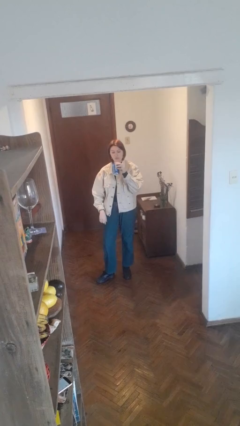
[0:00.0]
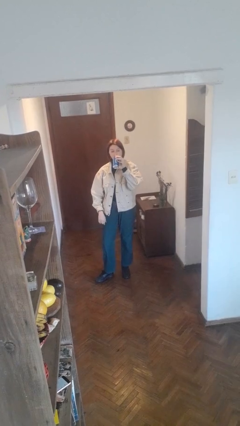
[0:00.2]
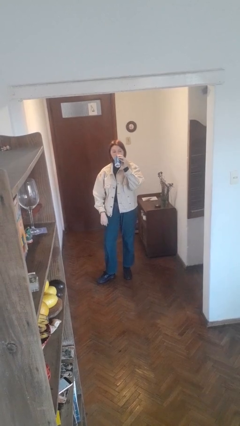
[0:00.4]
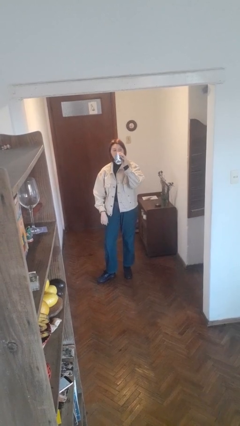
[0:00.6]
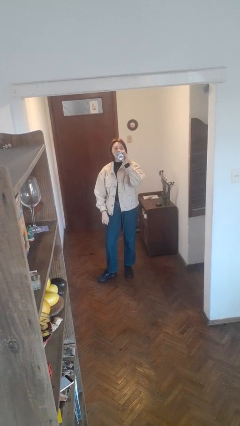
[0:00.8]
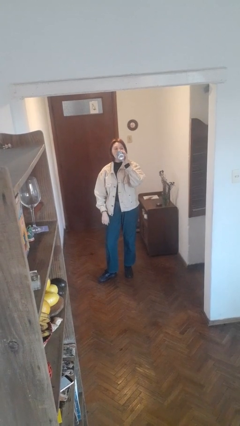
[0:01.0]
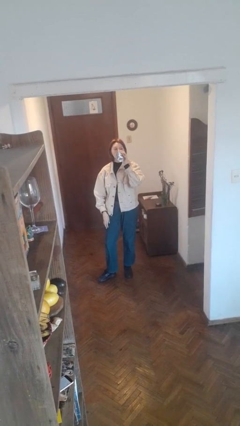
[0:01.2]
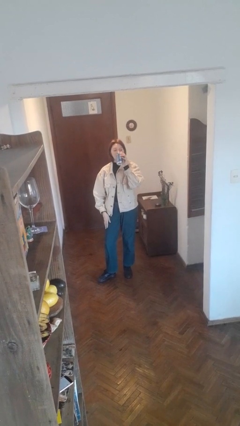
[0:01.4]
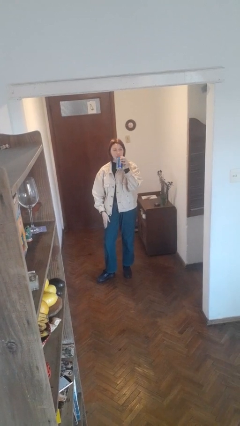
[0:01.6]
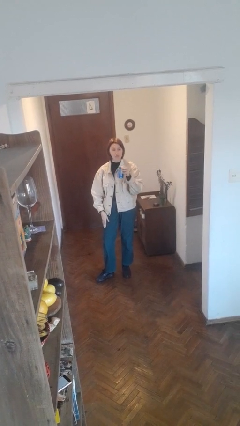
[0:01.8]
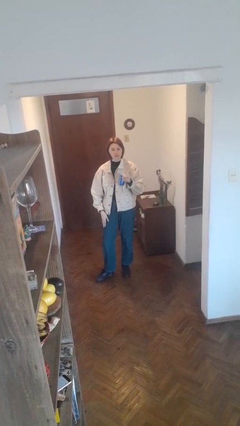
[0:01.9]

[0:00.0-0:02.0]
person drinks from beverage can

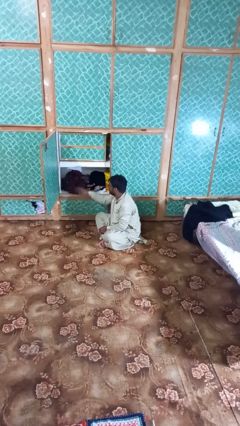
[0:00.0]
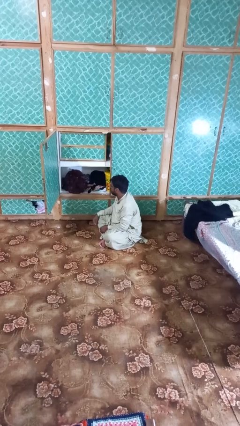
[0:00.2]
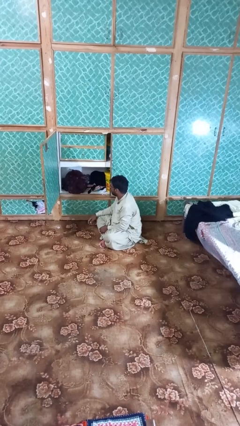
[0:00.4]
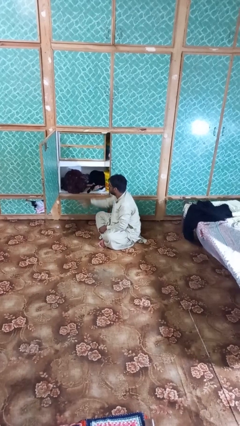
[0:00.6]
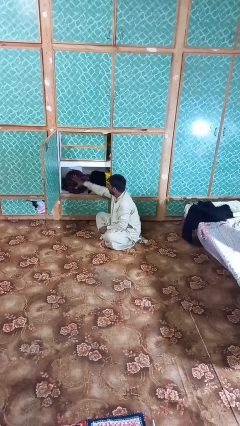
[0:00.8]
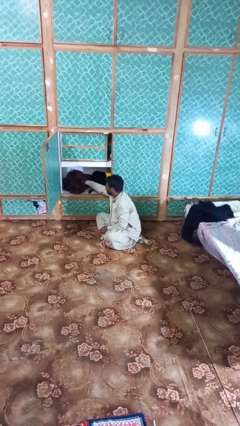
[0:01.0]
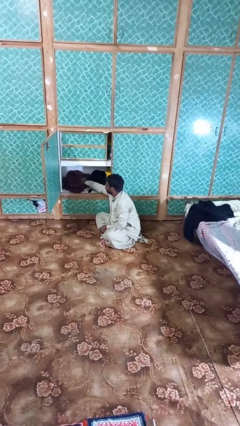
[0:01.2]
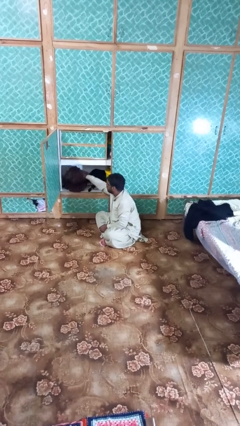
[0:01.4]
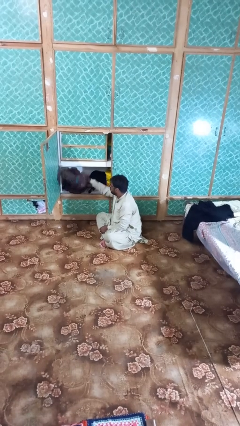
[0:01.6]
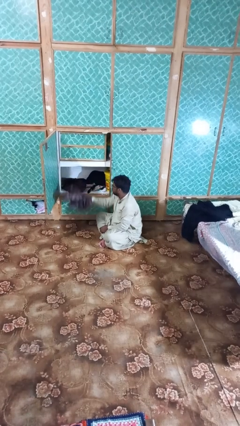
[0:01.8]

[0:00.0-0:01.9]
person takes clothes from dresser

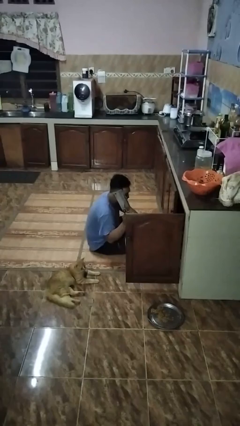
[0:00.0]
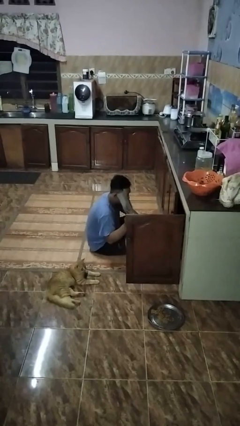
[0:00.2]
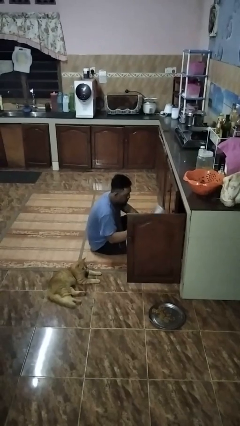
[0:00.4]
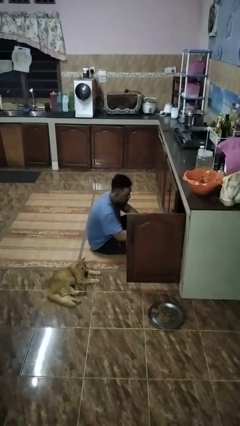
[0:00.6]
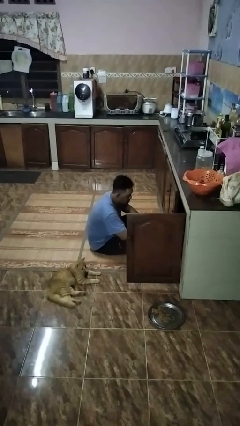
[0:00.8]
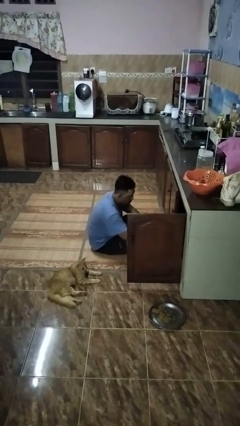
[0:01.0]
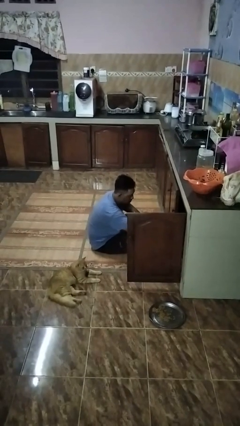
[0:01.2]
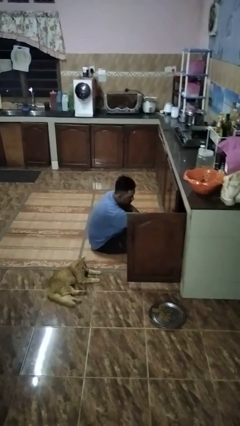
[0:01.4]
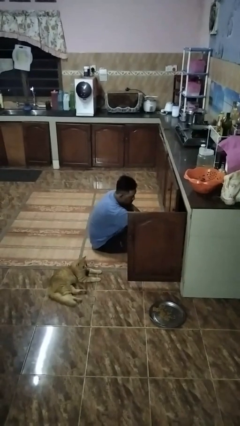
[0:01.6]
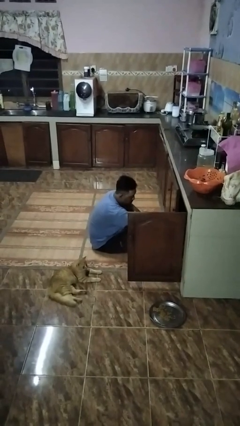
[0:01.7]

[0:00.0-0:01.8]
person puts object into kitchen drawer

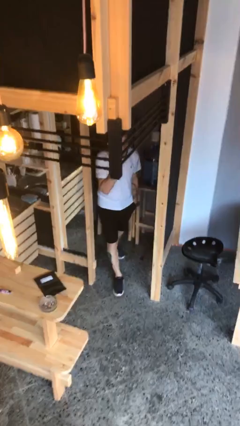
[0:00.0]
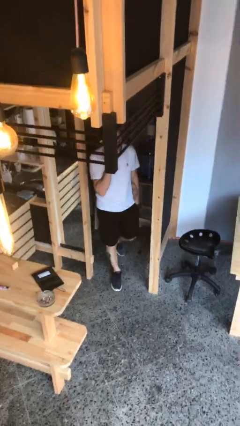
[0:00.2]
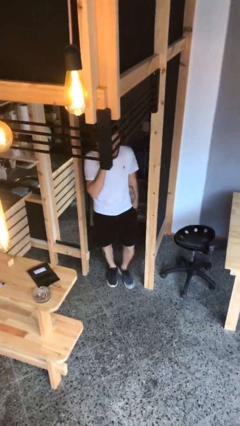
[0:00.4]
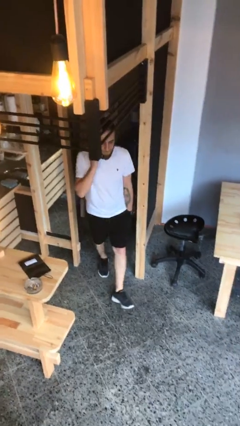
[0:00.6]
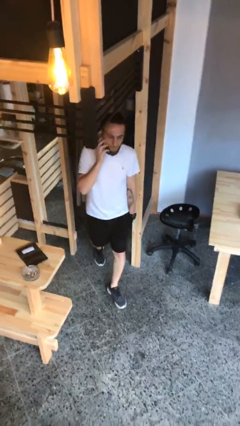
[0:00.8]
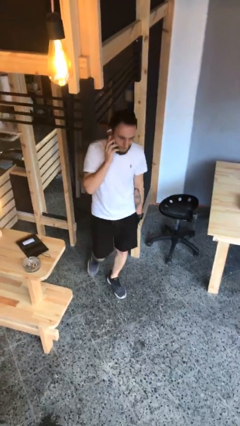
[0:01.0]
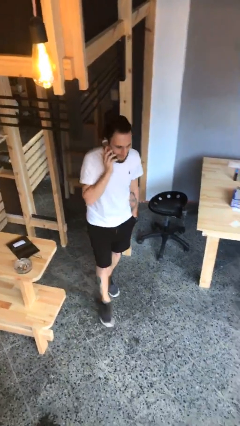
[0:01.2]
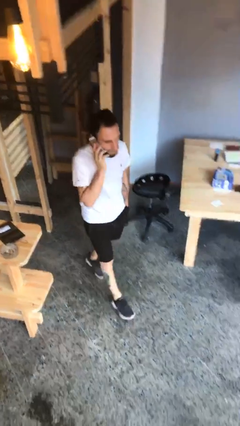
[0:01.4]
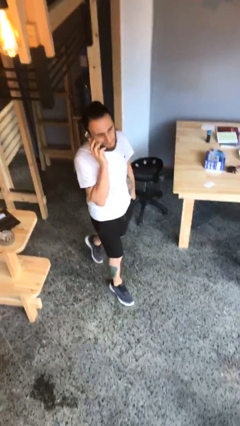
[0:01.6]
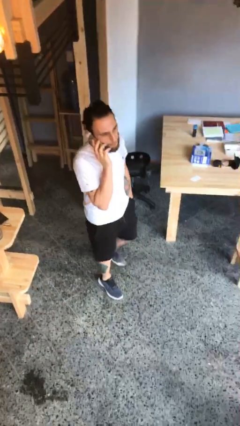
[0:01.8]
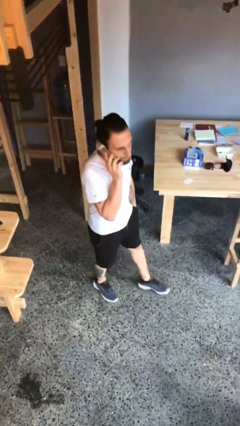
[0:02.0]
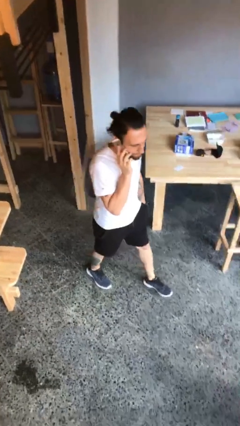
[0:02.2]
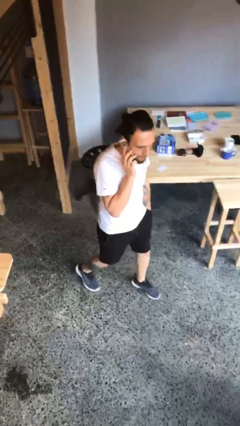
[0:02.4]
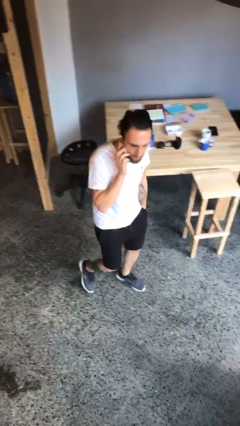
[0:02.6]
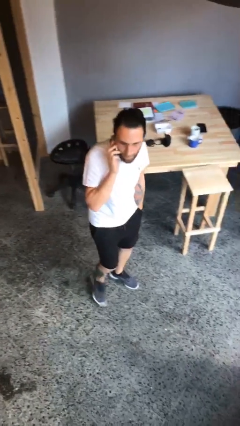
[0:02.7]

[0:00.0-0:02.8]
person enters scene through structure

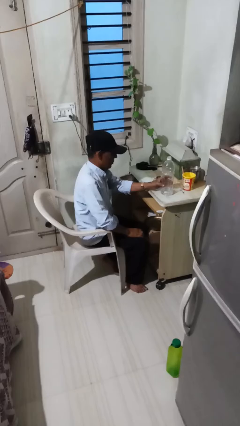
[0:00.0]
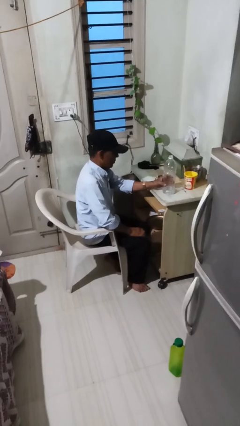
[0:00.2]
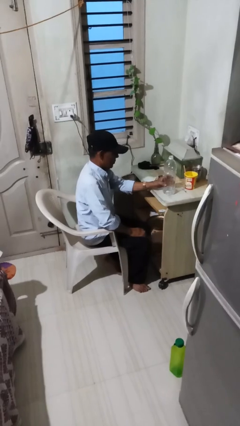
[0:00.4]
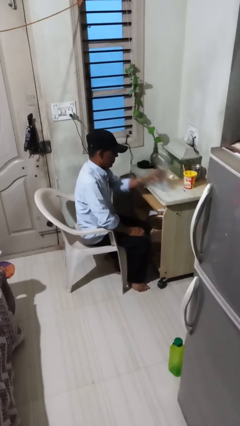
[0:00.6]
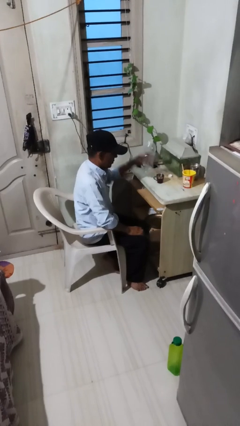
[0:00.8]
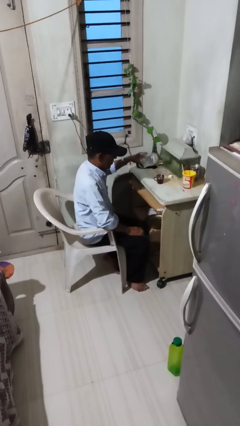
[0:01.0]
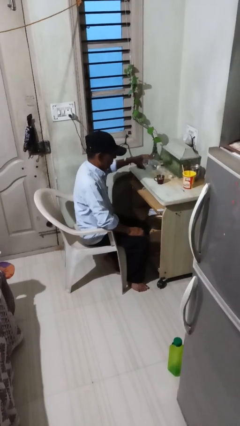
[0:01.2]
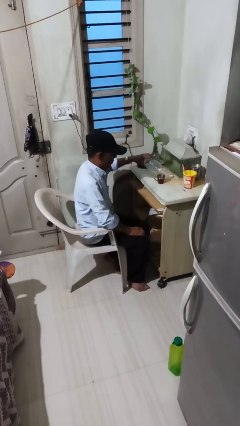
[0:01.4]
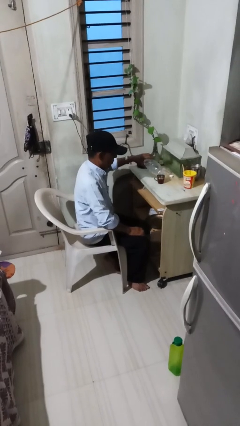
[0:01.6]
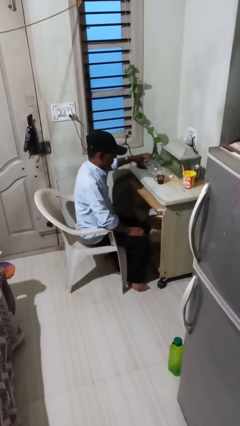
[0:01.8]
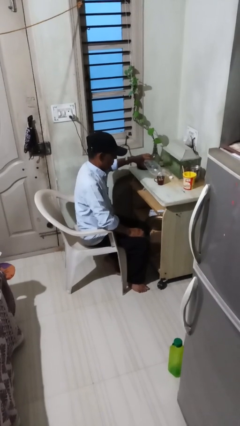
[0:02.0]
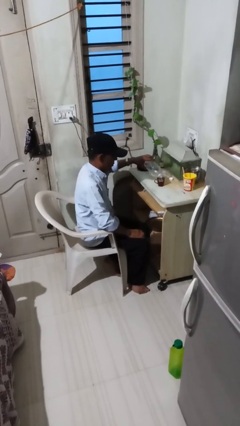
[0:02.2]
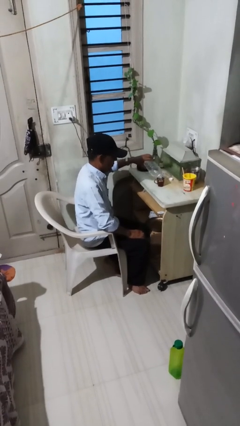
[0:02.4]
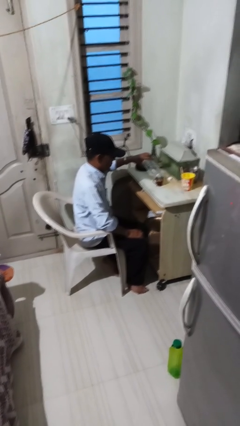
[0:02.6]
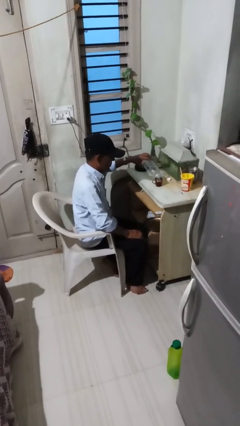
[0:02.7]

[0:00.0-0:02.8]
person pours liquid into cup

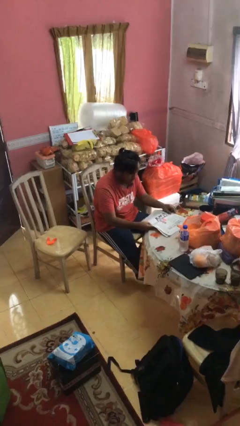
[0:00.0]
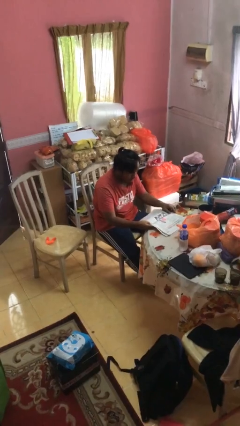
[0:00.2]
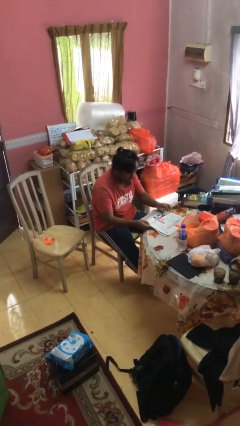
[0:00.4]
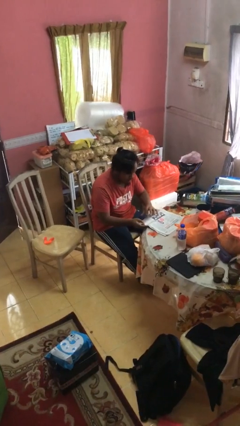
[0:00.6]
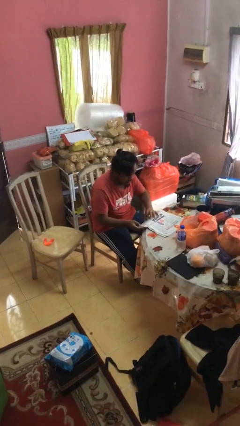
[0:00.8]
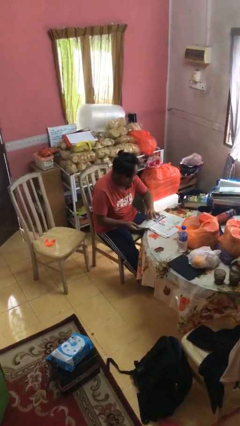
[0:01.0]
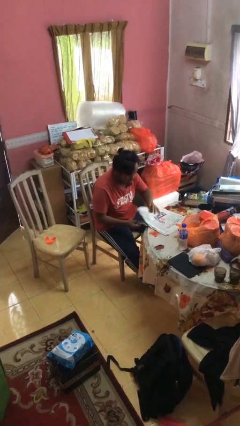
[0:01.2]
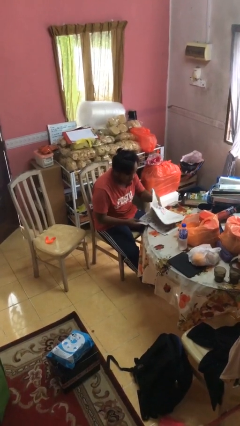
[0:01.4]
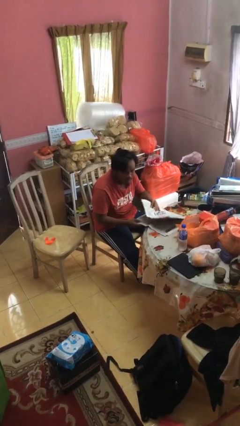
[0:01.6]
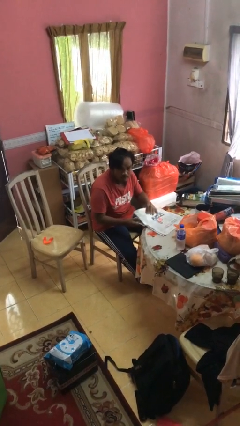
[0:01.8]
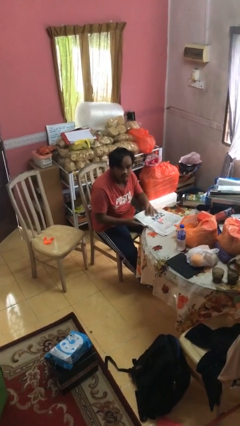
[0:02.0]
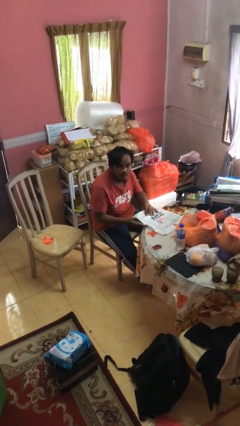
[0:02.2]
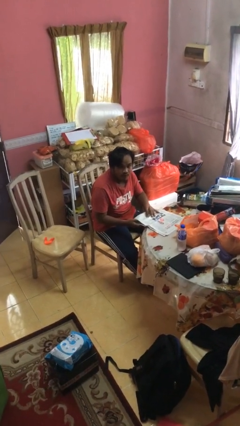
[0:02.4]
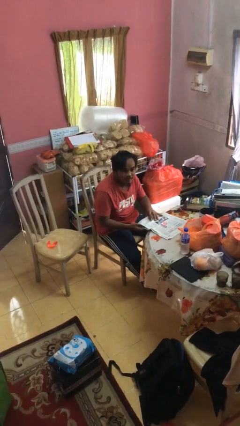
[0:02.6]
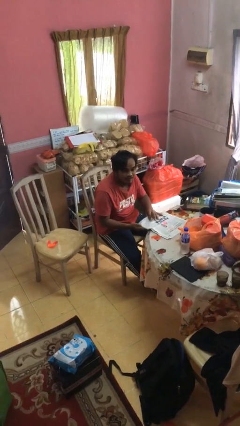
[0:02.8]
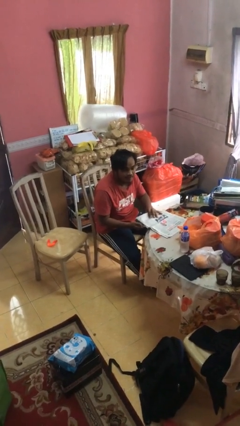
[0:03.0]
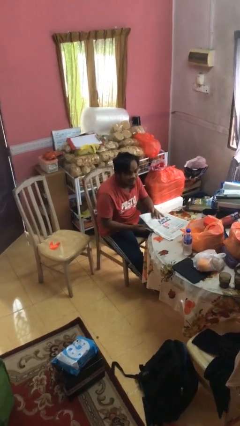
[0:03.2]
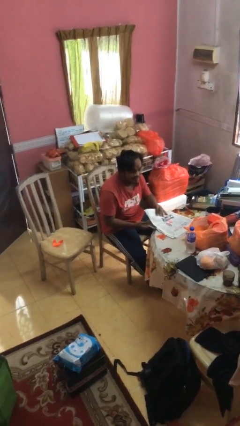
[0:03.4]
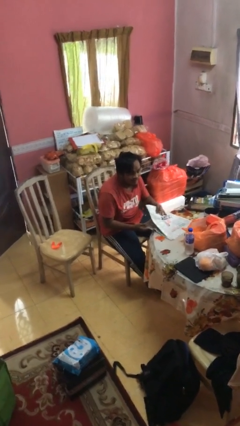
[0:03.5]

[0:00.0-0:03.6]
person reads newspaper

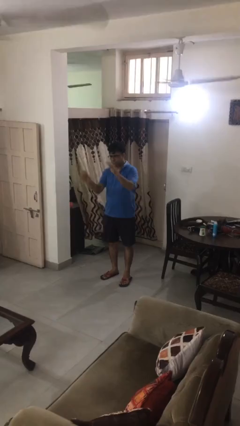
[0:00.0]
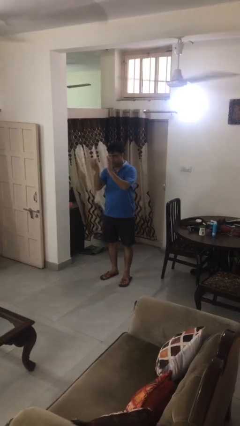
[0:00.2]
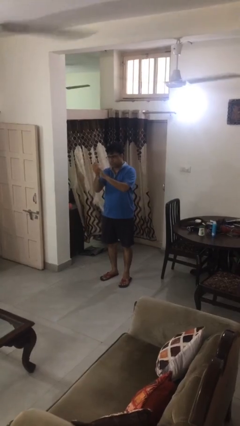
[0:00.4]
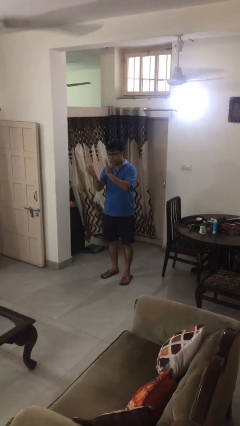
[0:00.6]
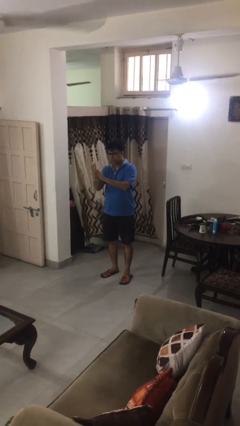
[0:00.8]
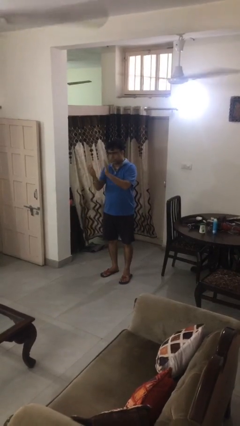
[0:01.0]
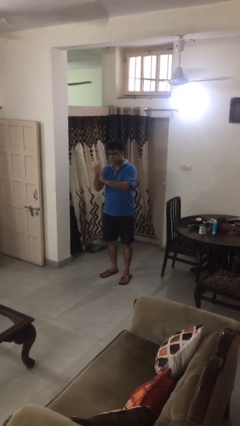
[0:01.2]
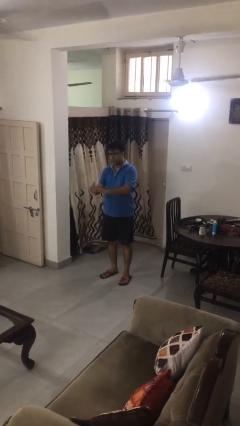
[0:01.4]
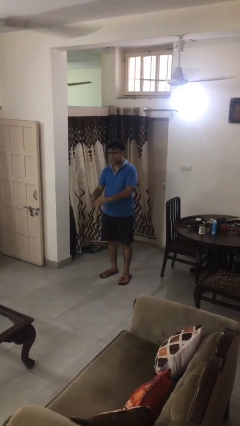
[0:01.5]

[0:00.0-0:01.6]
person claps hands

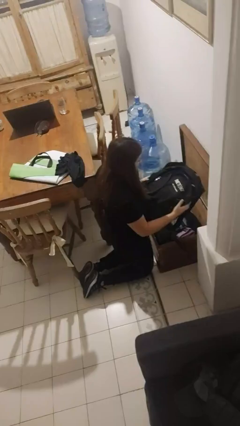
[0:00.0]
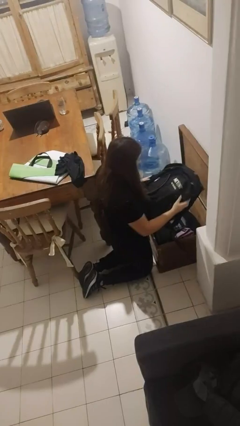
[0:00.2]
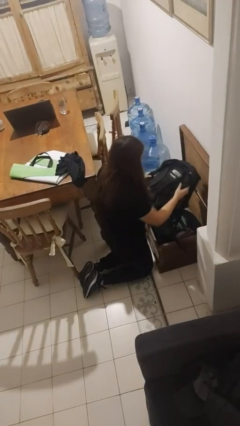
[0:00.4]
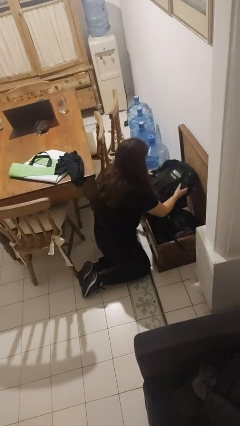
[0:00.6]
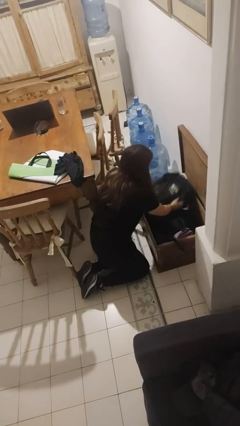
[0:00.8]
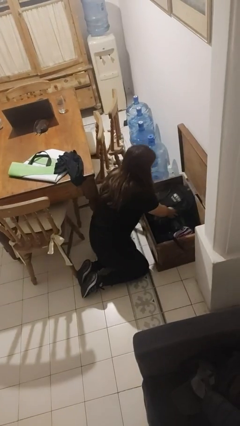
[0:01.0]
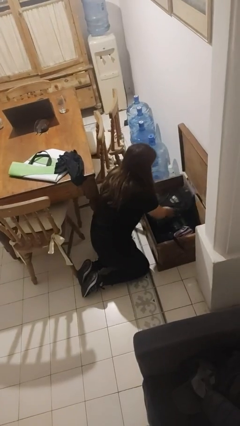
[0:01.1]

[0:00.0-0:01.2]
person puts object into box
